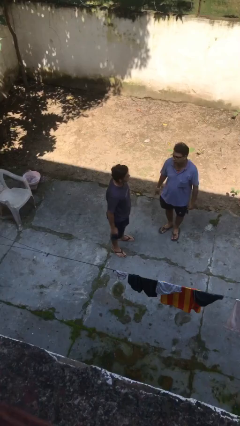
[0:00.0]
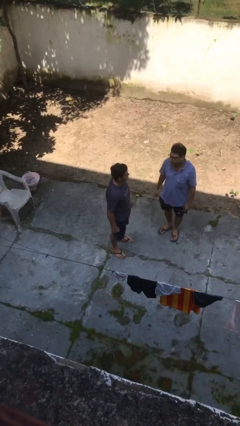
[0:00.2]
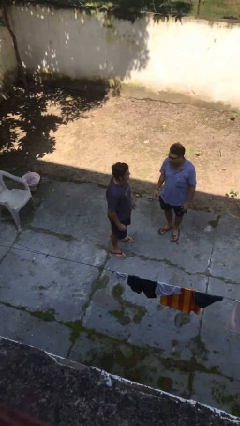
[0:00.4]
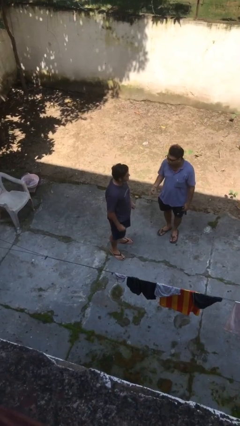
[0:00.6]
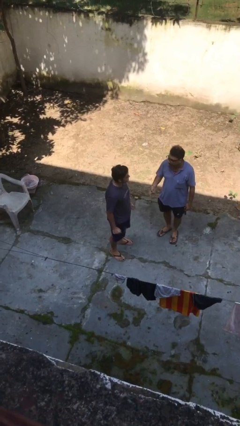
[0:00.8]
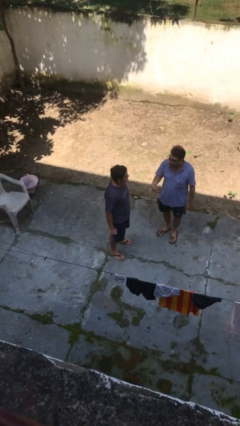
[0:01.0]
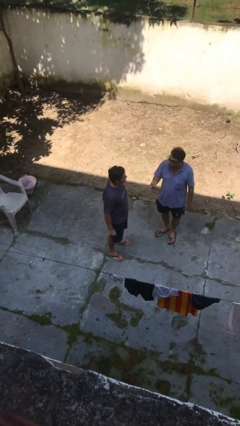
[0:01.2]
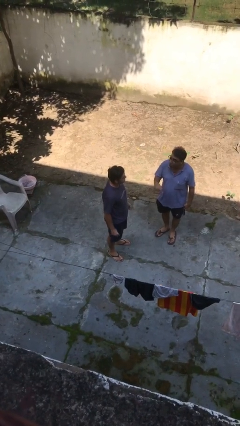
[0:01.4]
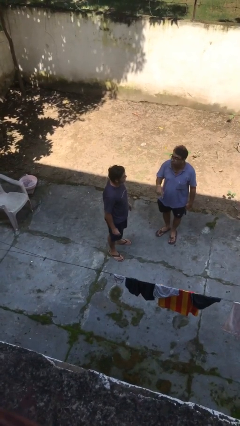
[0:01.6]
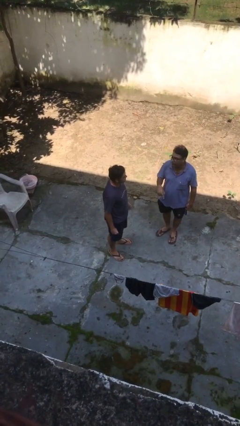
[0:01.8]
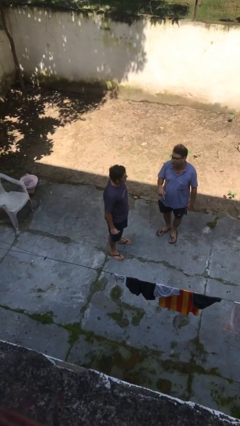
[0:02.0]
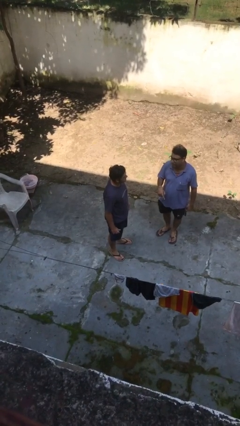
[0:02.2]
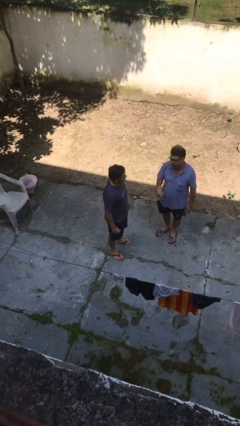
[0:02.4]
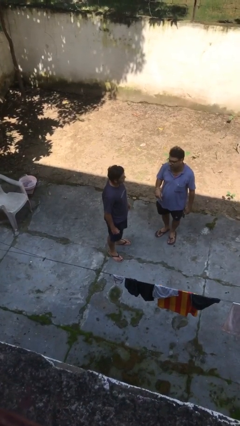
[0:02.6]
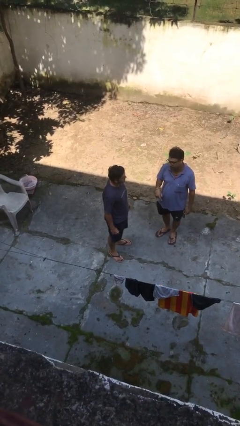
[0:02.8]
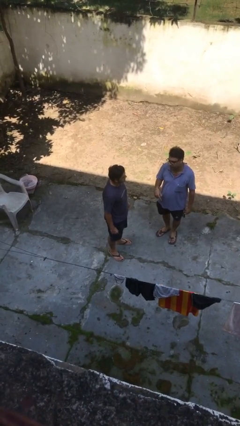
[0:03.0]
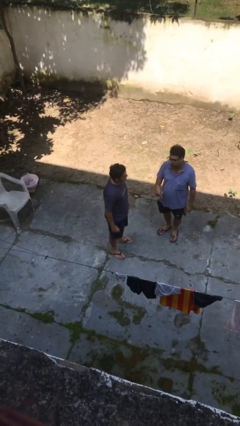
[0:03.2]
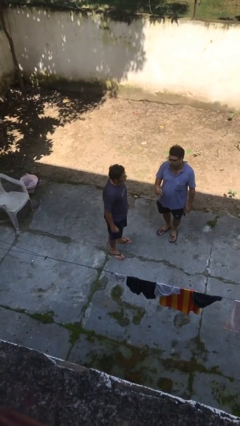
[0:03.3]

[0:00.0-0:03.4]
person talks to person

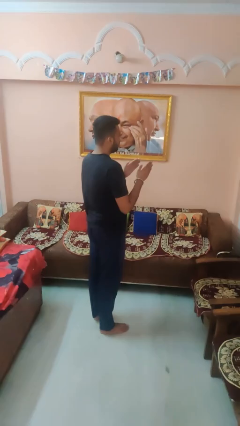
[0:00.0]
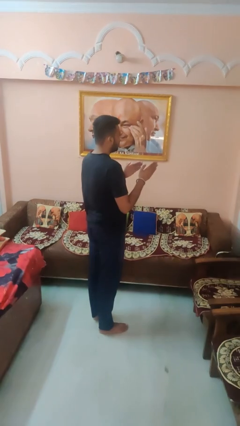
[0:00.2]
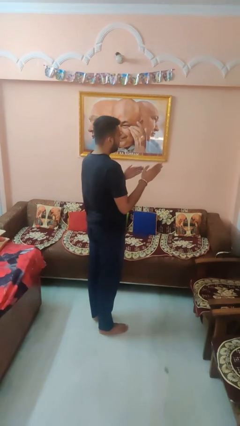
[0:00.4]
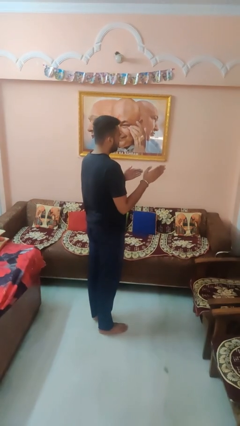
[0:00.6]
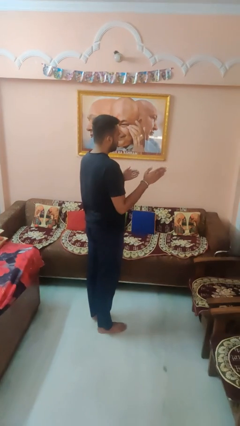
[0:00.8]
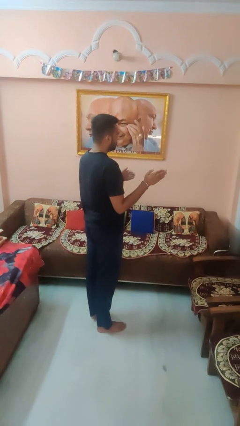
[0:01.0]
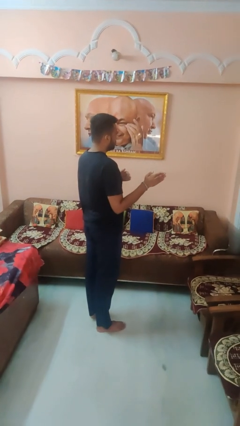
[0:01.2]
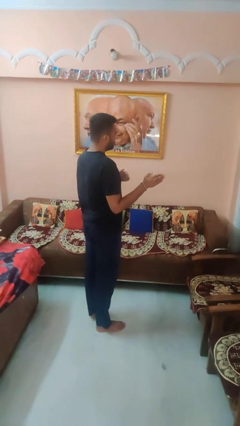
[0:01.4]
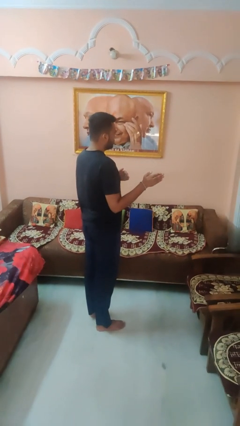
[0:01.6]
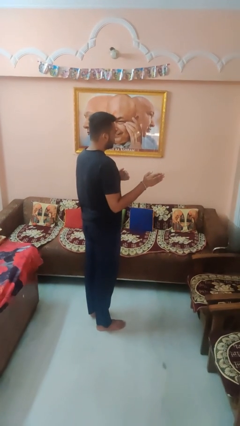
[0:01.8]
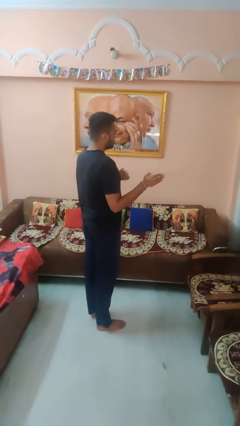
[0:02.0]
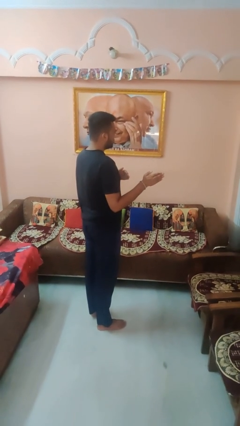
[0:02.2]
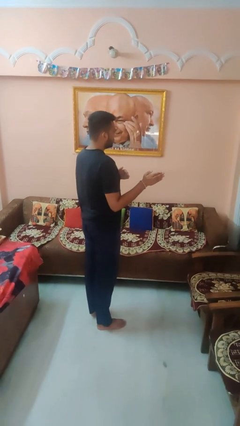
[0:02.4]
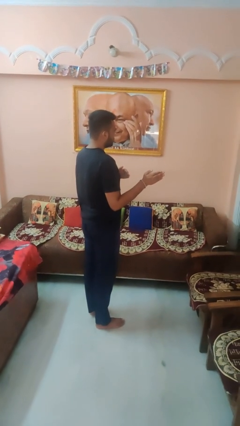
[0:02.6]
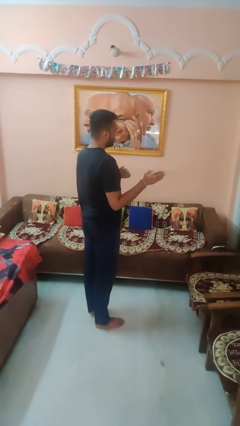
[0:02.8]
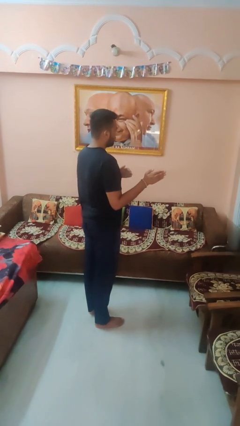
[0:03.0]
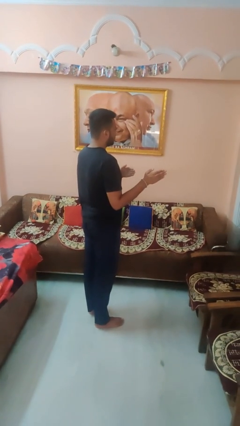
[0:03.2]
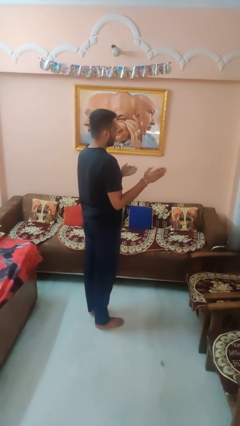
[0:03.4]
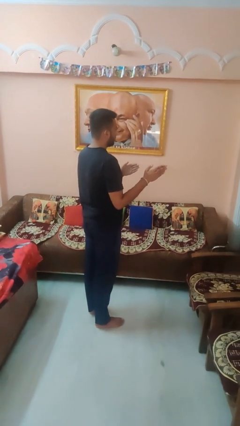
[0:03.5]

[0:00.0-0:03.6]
person gestures swipe right

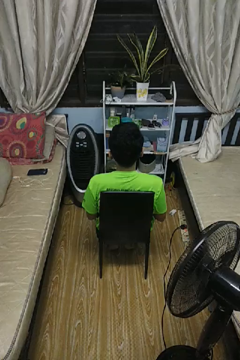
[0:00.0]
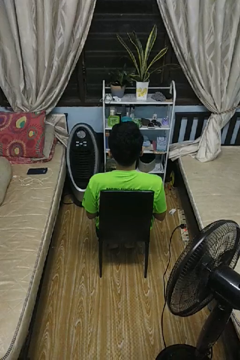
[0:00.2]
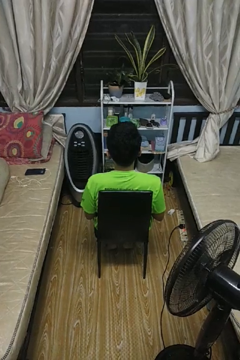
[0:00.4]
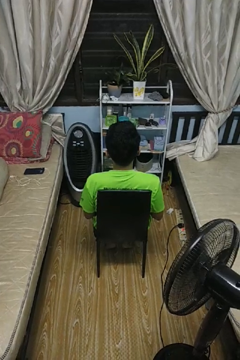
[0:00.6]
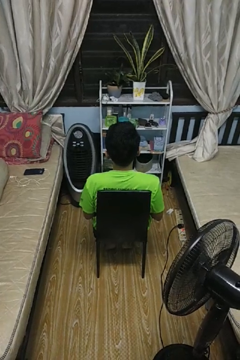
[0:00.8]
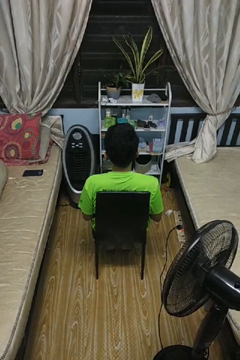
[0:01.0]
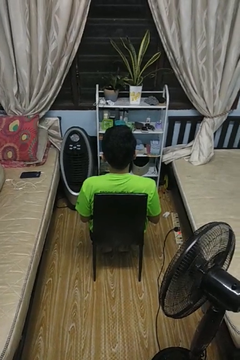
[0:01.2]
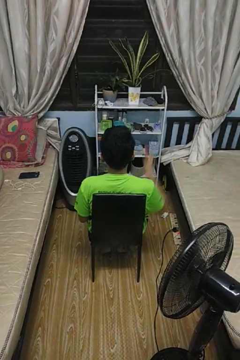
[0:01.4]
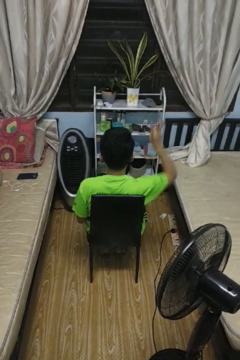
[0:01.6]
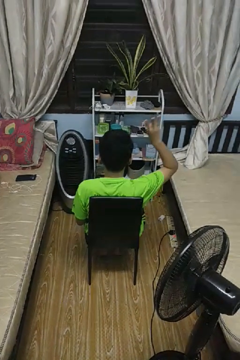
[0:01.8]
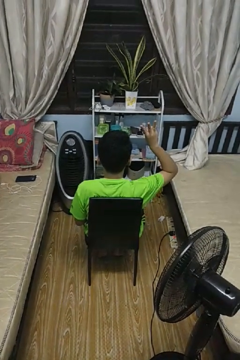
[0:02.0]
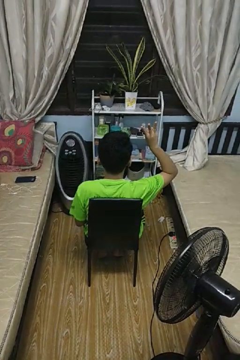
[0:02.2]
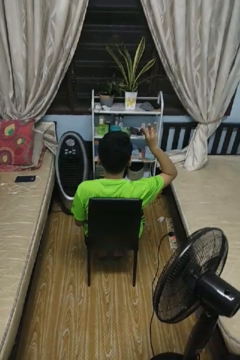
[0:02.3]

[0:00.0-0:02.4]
person gestures number three

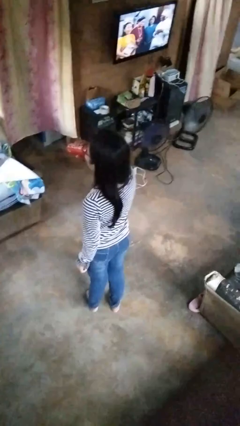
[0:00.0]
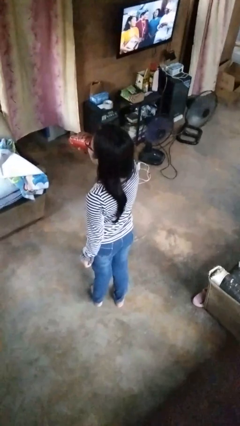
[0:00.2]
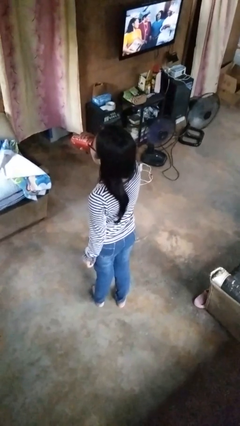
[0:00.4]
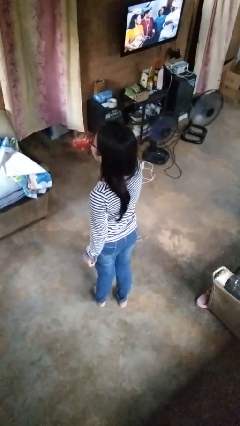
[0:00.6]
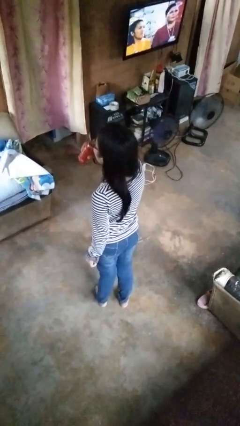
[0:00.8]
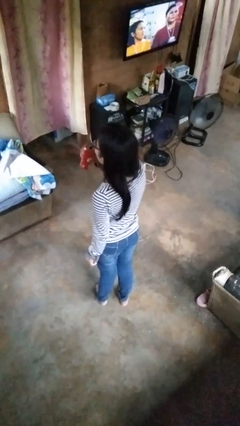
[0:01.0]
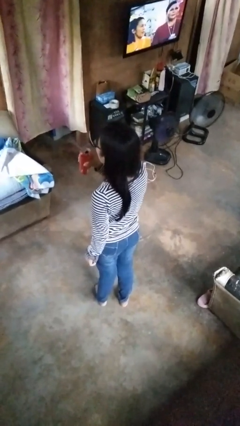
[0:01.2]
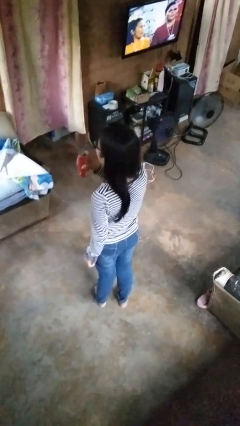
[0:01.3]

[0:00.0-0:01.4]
person drinks from beverage can

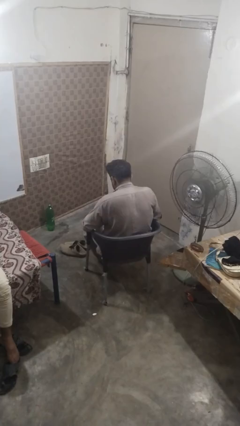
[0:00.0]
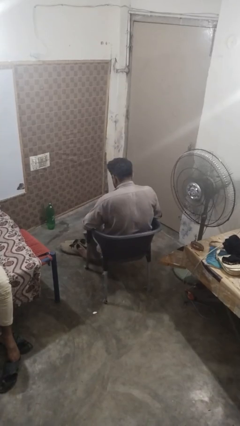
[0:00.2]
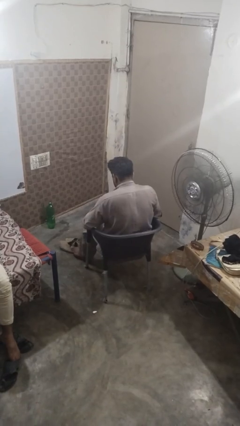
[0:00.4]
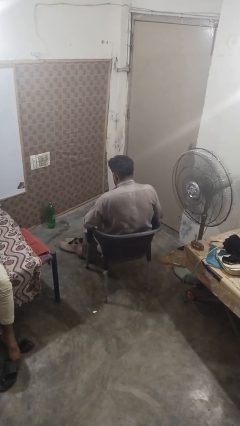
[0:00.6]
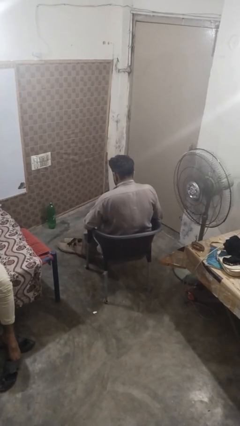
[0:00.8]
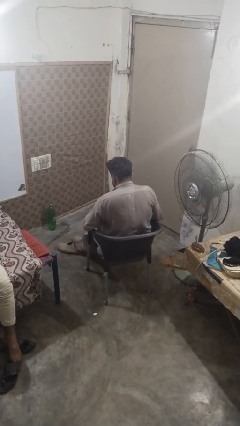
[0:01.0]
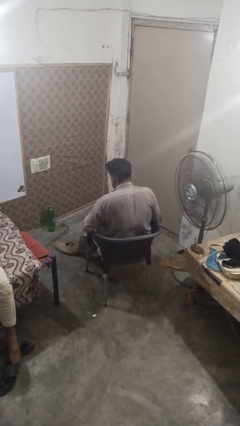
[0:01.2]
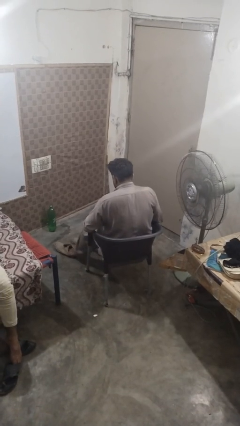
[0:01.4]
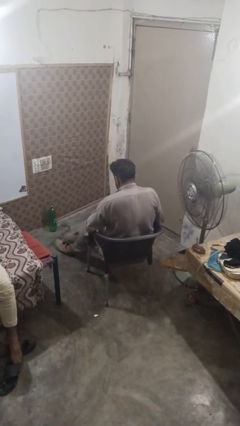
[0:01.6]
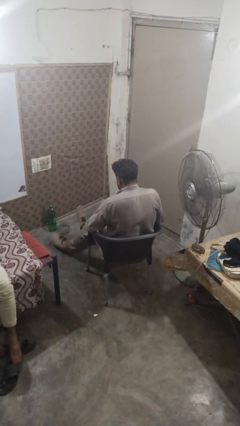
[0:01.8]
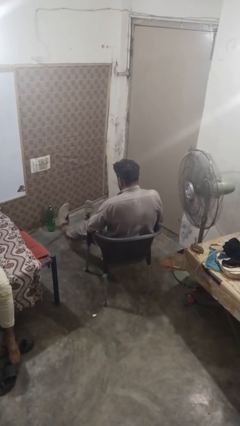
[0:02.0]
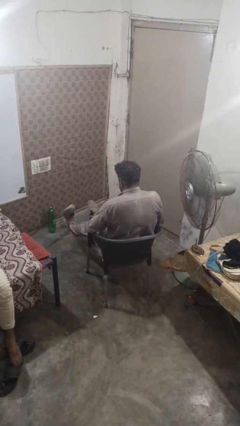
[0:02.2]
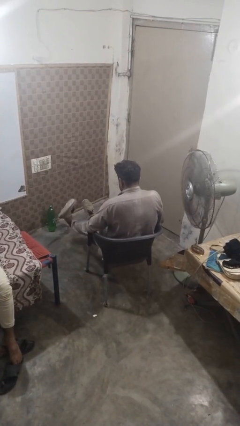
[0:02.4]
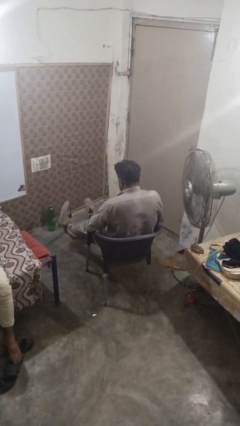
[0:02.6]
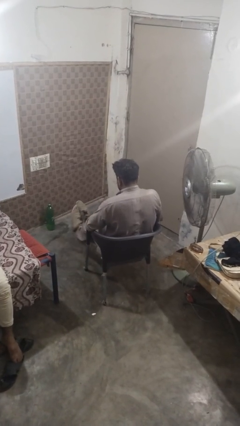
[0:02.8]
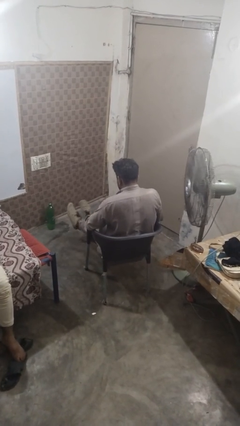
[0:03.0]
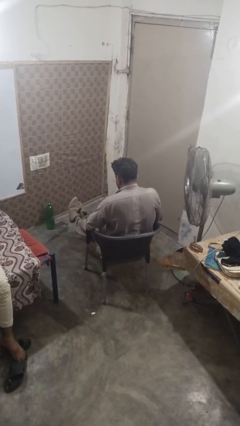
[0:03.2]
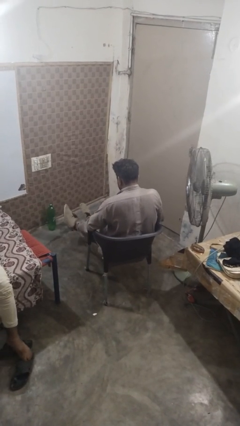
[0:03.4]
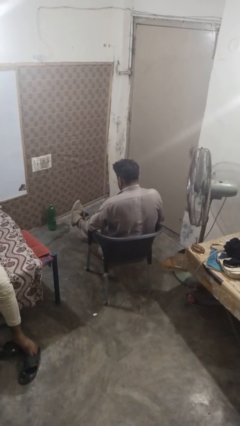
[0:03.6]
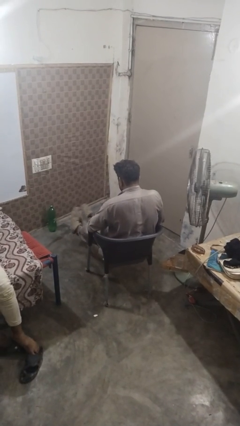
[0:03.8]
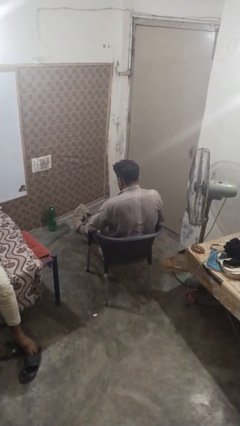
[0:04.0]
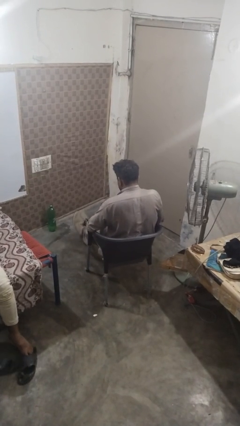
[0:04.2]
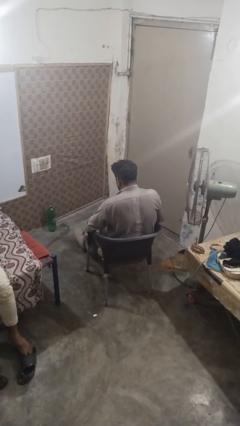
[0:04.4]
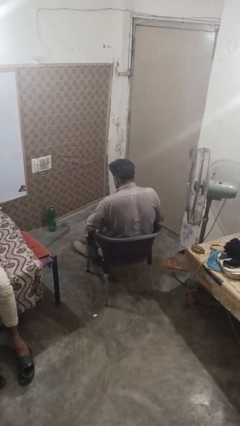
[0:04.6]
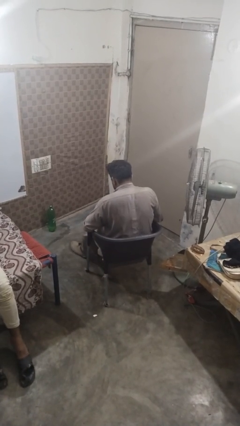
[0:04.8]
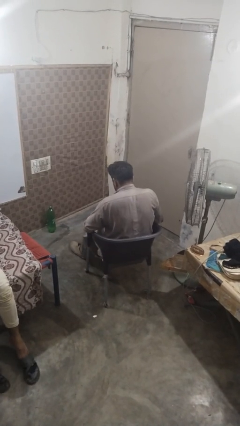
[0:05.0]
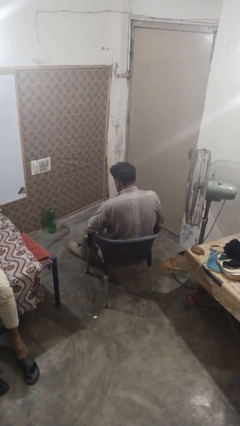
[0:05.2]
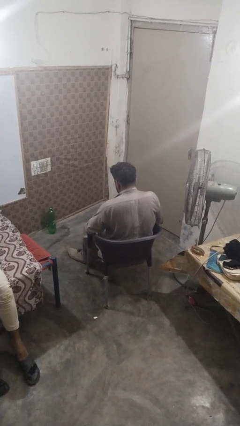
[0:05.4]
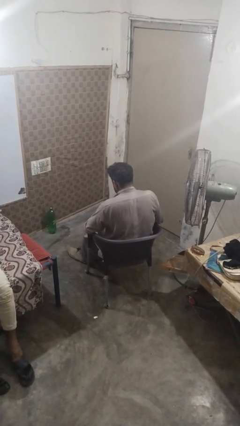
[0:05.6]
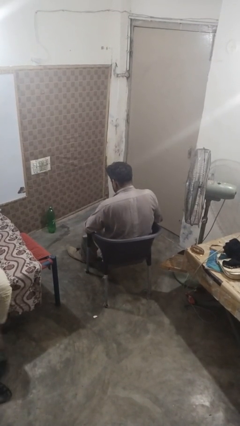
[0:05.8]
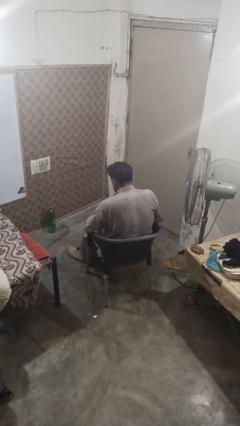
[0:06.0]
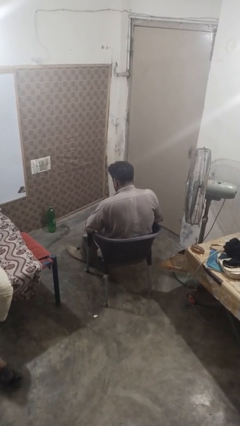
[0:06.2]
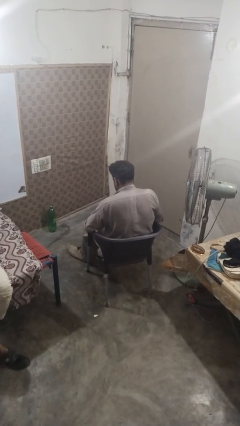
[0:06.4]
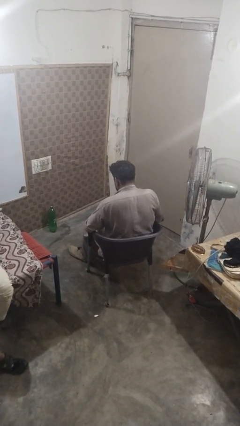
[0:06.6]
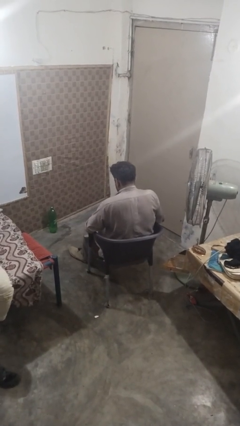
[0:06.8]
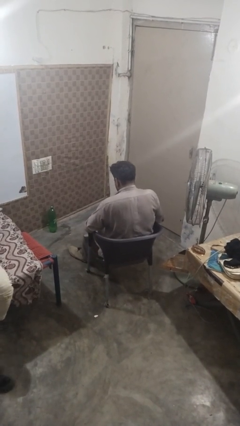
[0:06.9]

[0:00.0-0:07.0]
person puts on shoes
